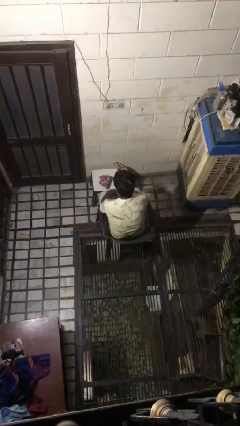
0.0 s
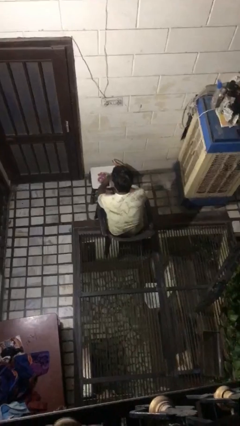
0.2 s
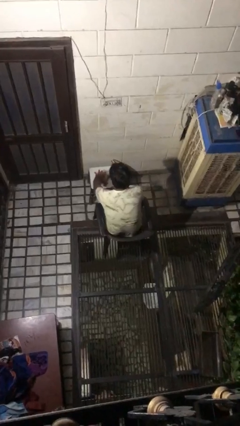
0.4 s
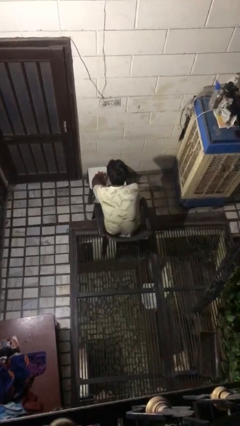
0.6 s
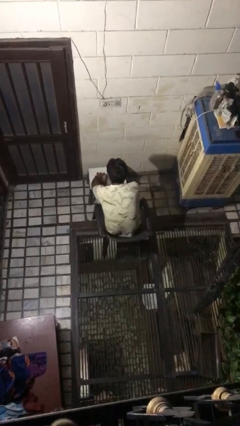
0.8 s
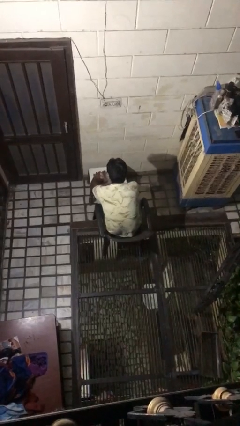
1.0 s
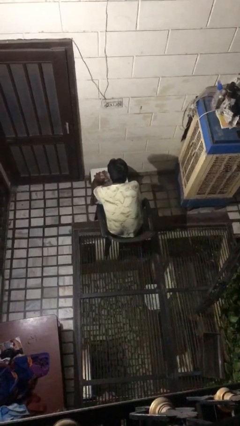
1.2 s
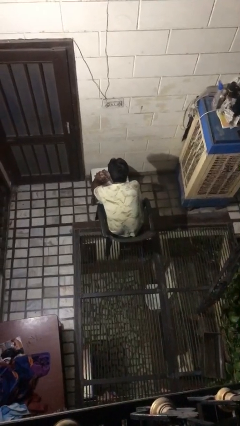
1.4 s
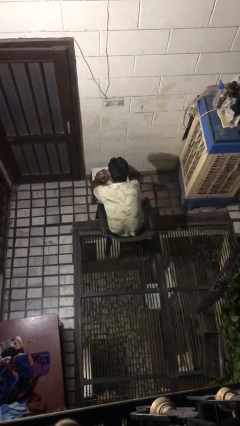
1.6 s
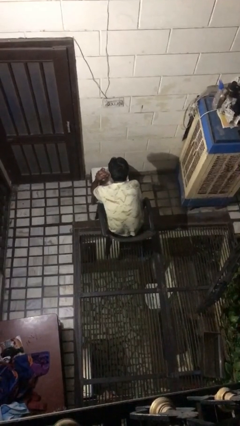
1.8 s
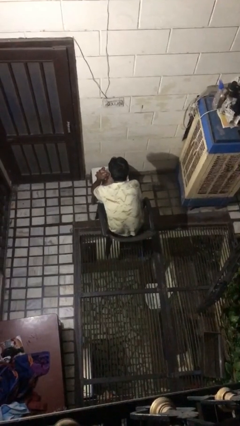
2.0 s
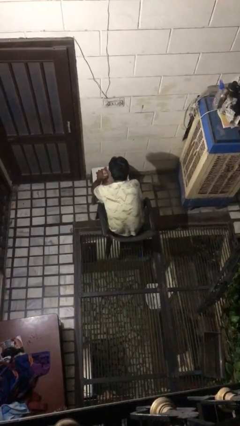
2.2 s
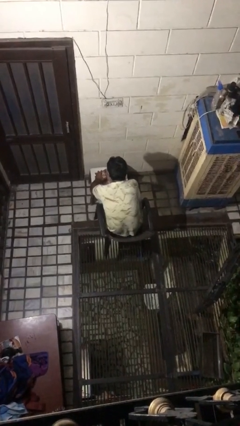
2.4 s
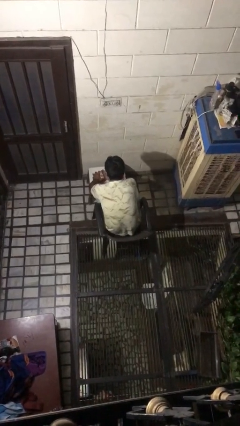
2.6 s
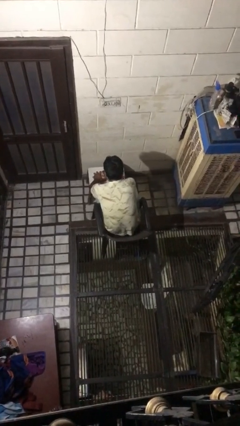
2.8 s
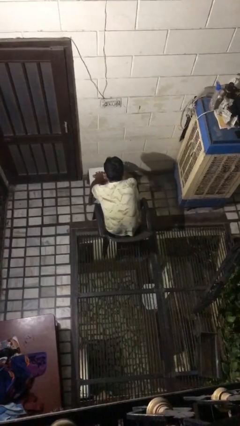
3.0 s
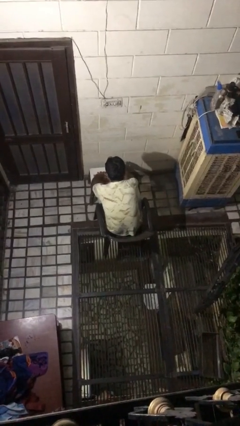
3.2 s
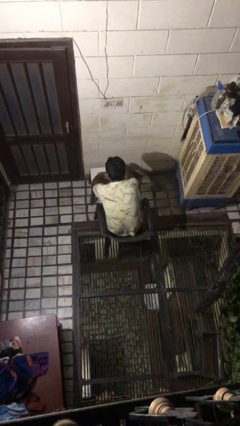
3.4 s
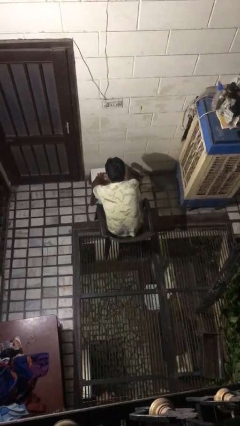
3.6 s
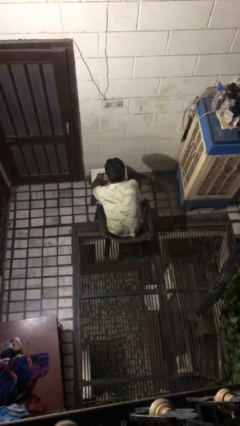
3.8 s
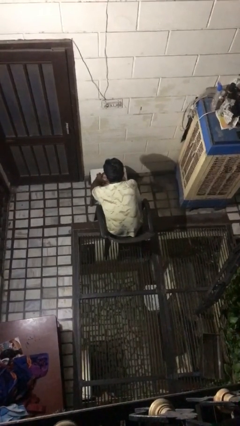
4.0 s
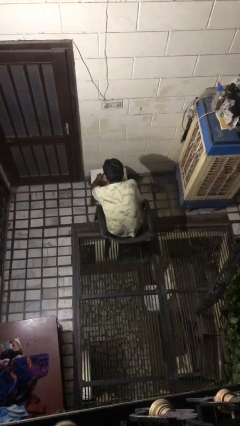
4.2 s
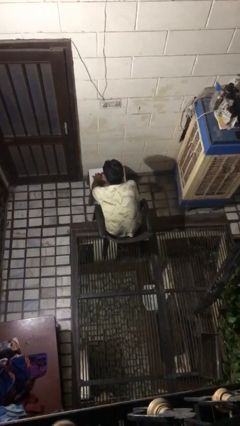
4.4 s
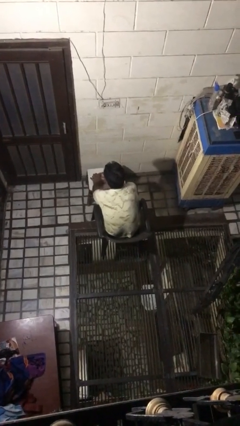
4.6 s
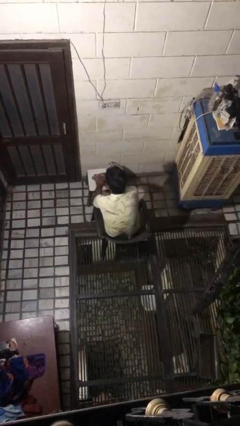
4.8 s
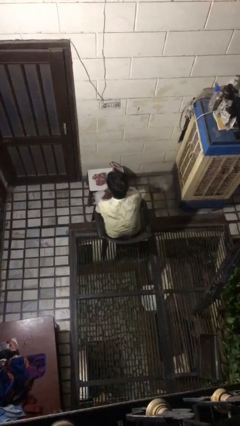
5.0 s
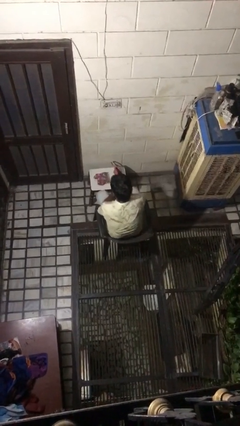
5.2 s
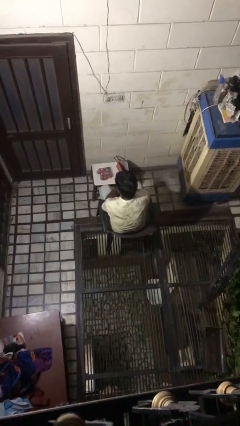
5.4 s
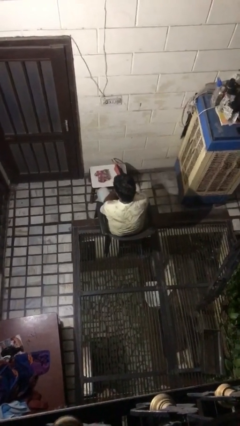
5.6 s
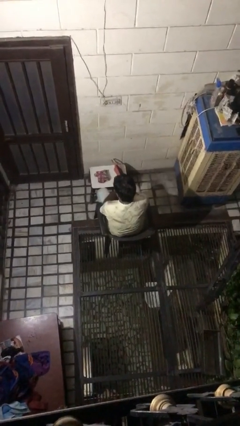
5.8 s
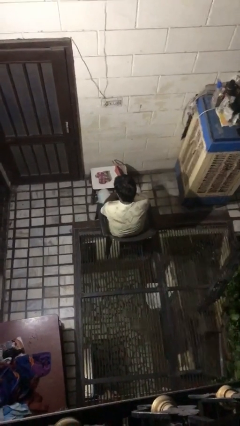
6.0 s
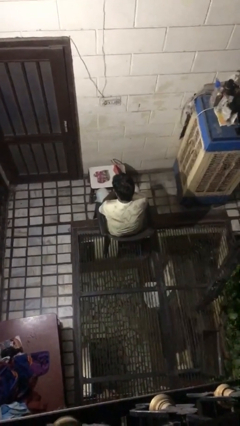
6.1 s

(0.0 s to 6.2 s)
person wraps box

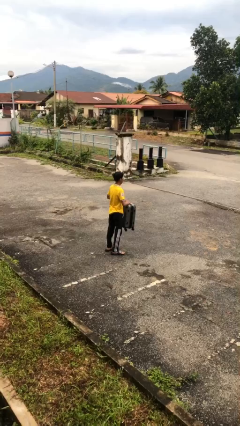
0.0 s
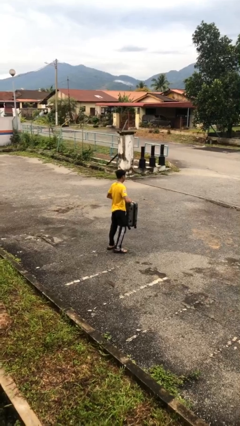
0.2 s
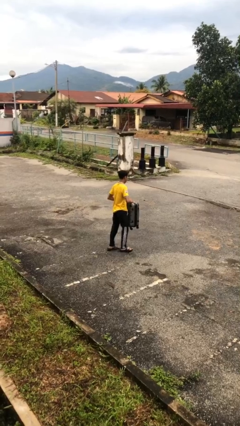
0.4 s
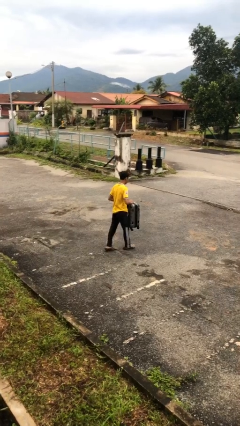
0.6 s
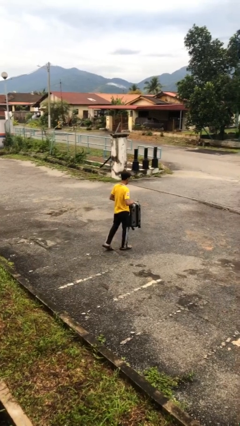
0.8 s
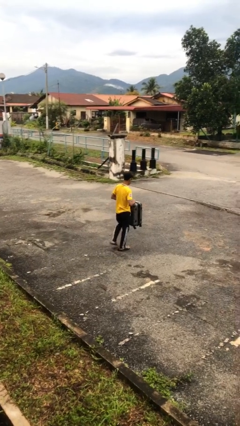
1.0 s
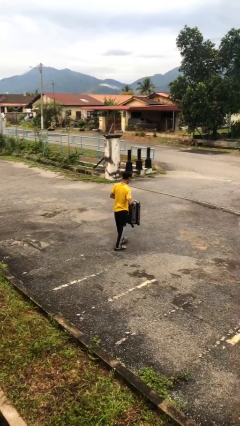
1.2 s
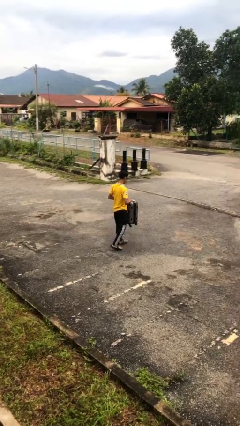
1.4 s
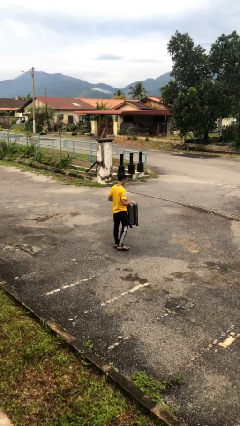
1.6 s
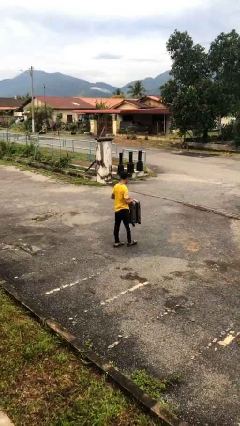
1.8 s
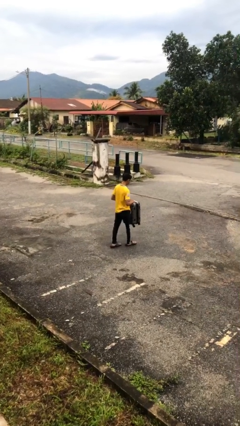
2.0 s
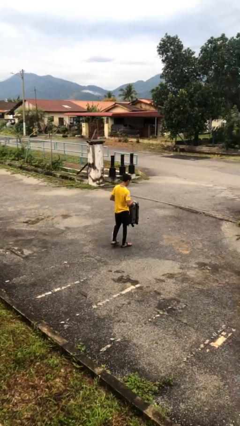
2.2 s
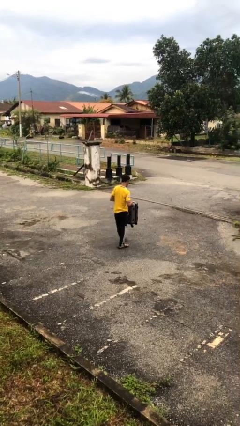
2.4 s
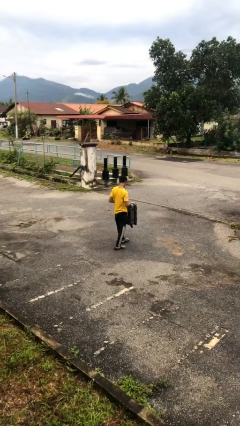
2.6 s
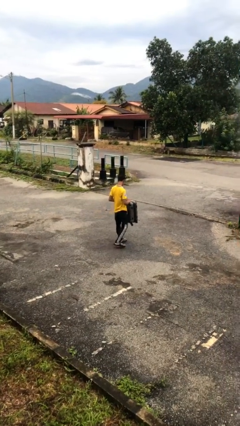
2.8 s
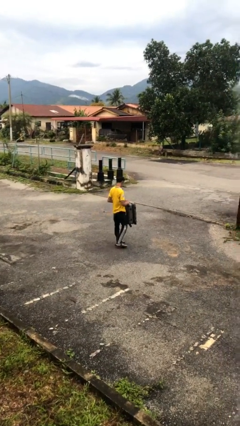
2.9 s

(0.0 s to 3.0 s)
person carries heavy object

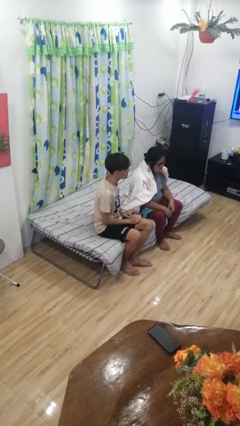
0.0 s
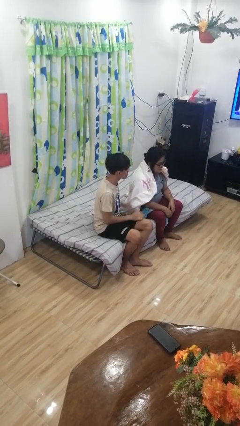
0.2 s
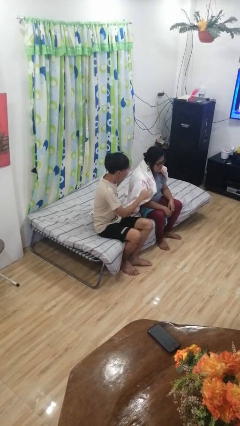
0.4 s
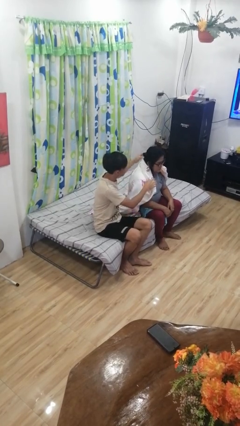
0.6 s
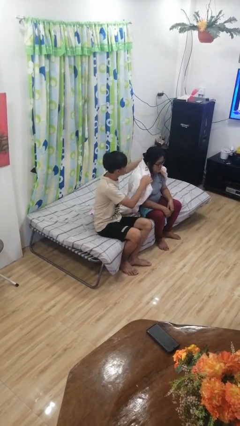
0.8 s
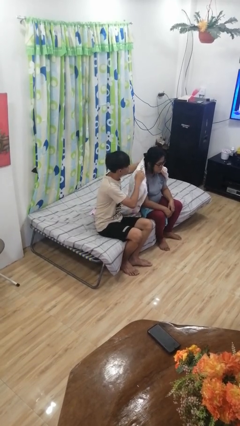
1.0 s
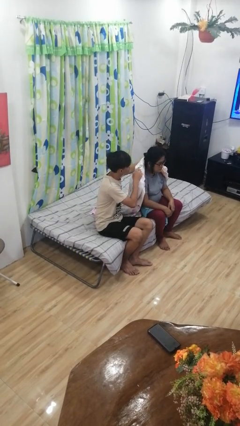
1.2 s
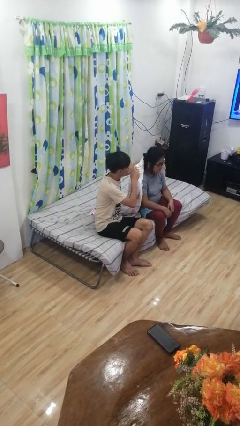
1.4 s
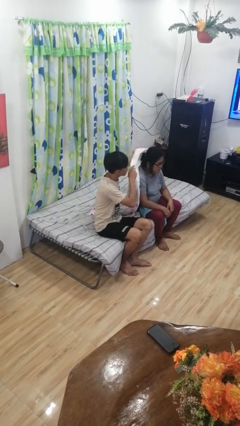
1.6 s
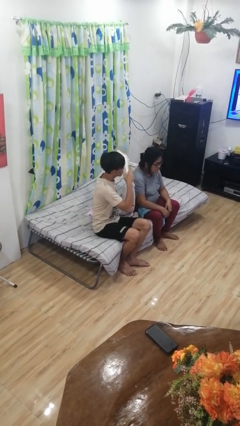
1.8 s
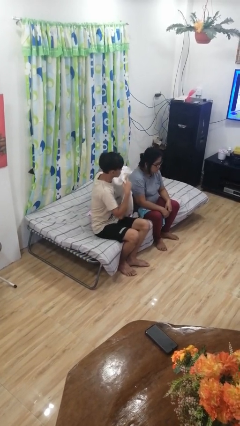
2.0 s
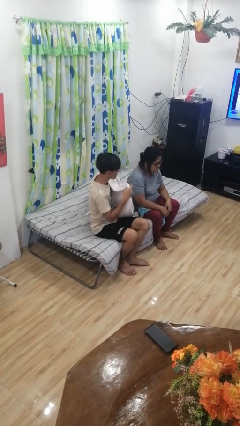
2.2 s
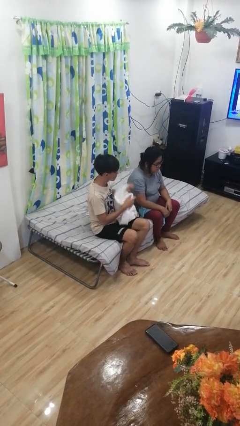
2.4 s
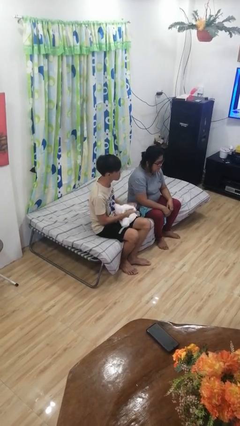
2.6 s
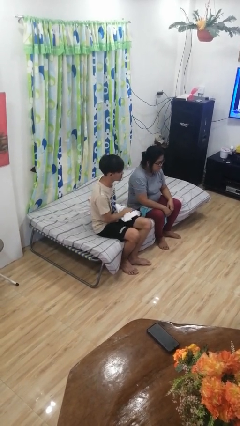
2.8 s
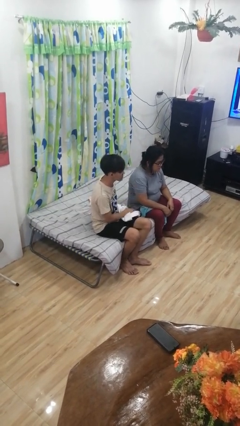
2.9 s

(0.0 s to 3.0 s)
person uncovers friend with blanket

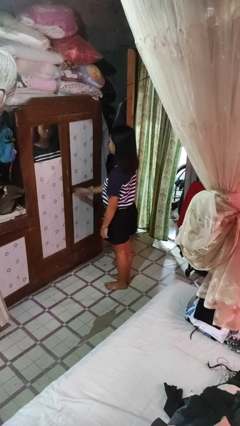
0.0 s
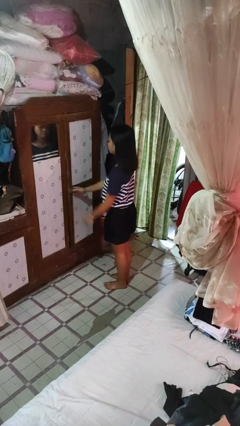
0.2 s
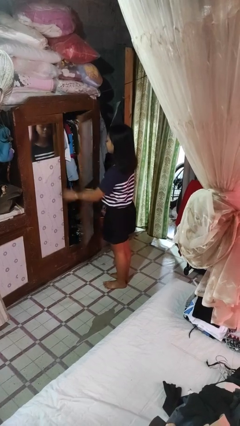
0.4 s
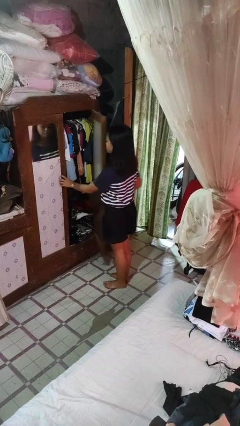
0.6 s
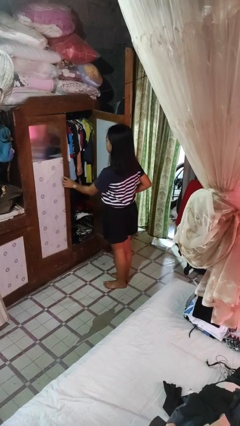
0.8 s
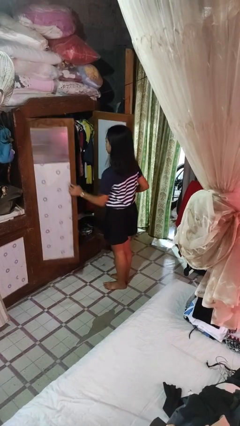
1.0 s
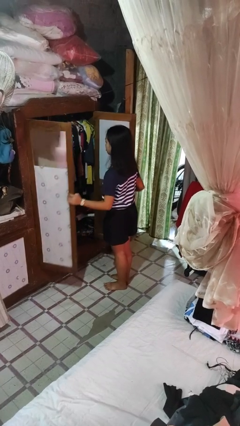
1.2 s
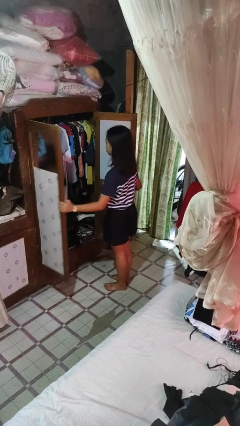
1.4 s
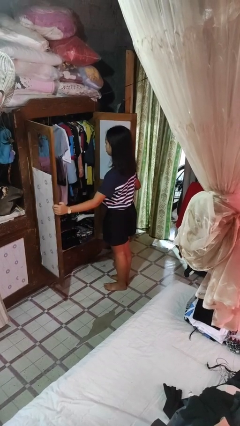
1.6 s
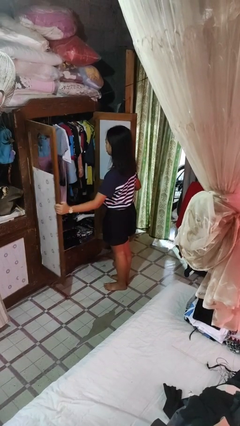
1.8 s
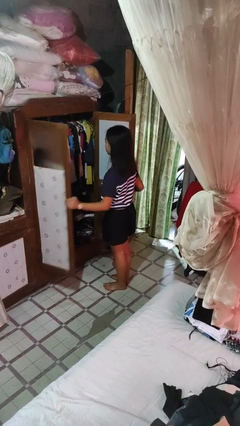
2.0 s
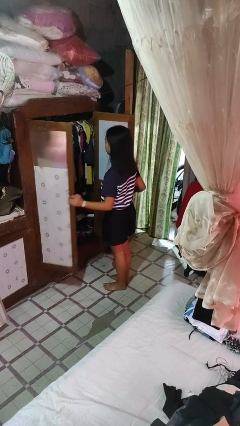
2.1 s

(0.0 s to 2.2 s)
person opens closet door

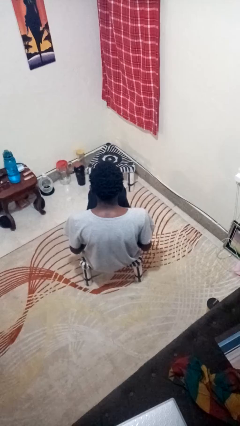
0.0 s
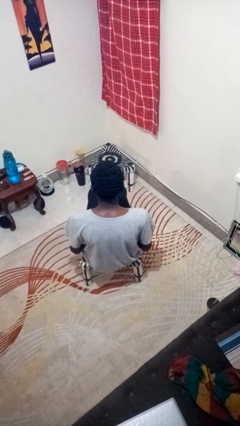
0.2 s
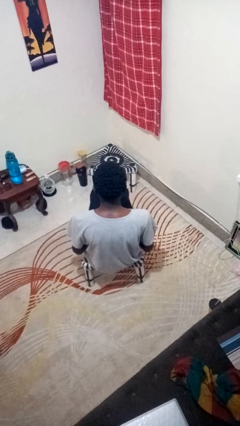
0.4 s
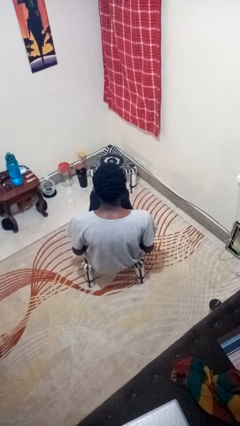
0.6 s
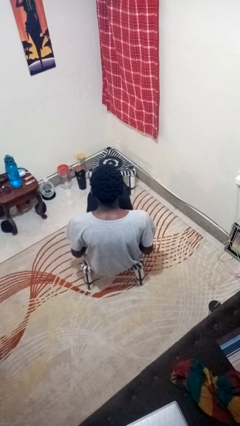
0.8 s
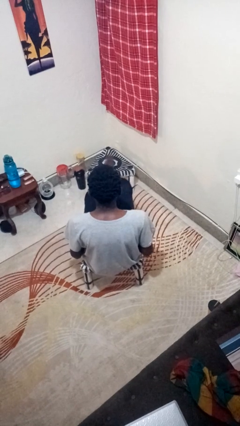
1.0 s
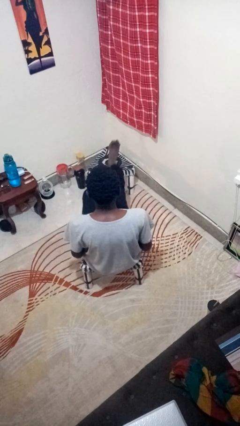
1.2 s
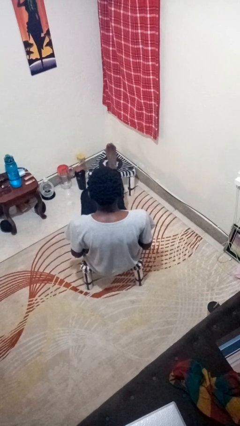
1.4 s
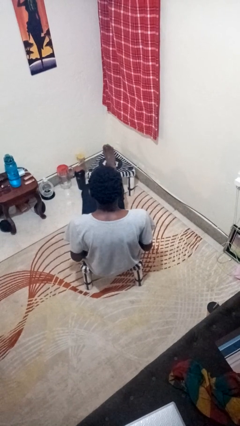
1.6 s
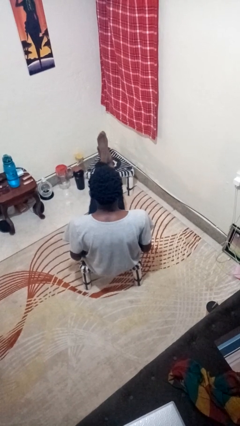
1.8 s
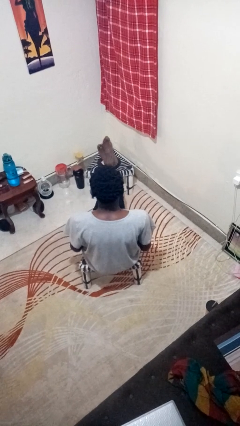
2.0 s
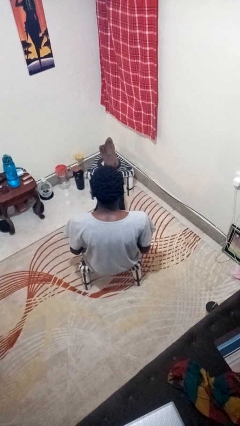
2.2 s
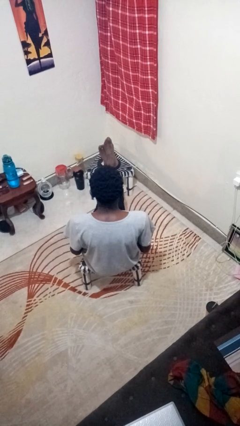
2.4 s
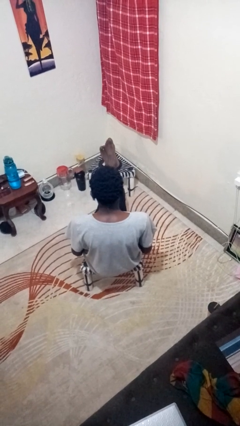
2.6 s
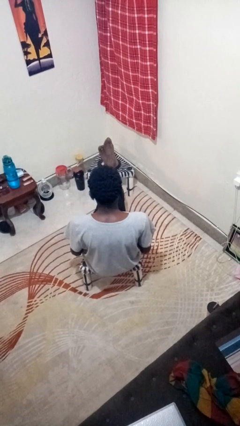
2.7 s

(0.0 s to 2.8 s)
person puts feet up

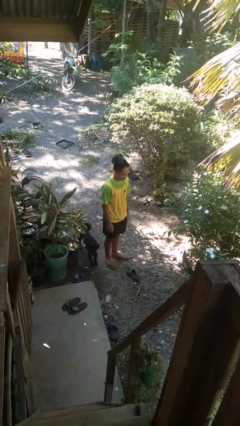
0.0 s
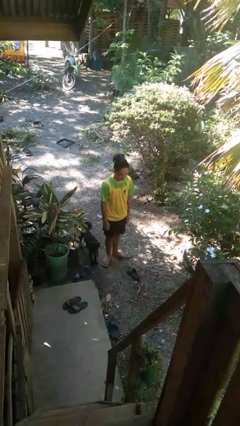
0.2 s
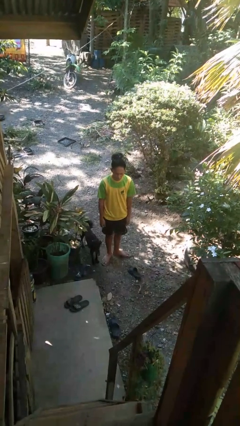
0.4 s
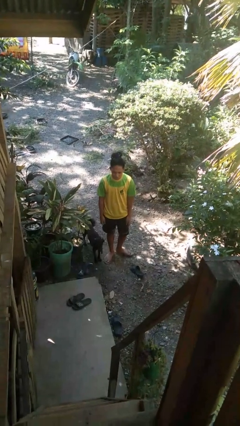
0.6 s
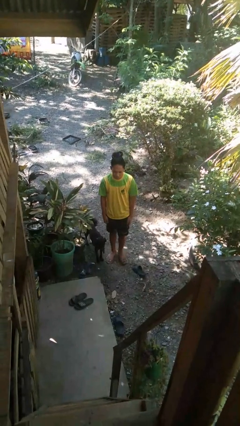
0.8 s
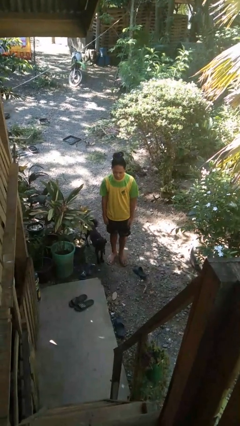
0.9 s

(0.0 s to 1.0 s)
person bows
